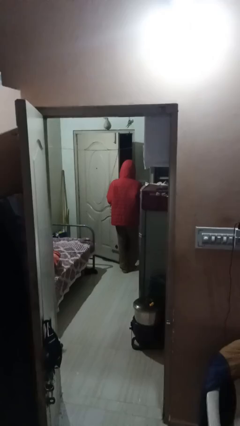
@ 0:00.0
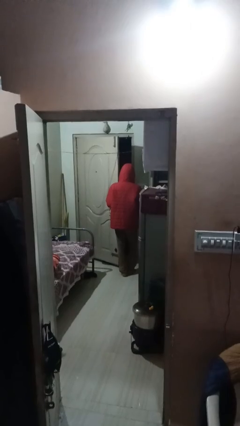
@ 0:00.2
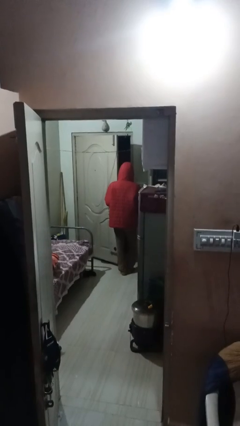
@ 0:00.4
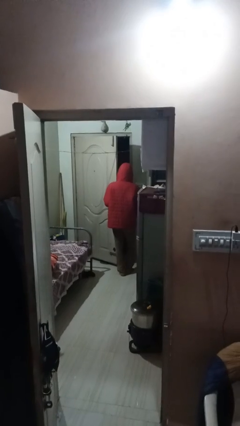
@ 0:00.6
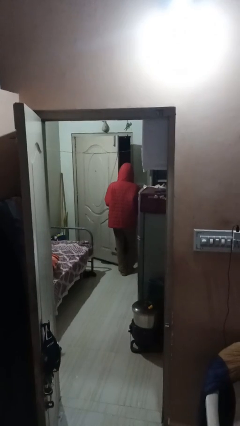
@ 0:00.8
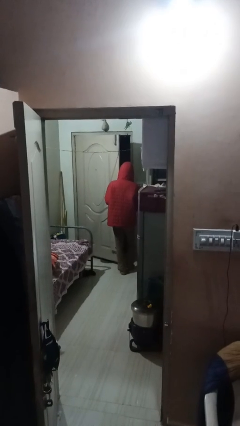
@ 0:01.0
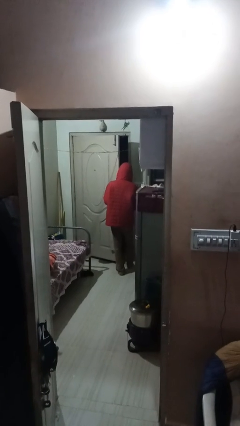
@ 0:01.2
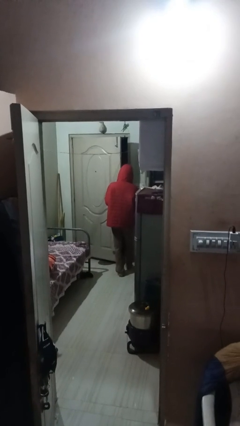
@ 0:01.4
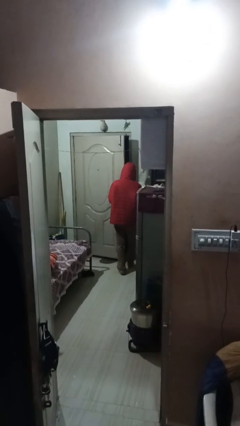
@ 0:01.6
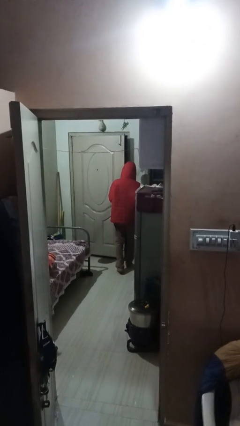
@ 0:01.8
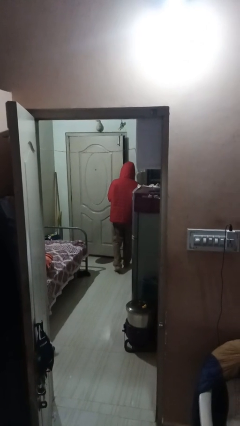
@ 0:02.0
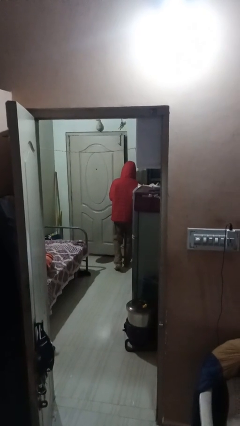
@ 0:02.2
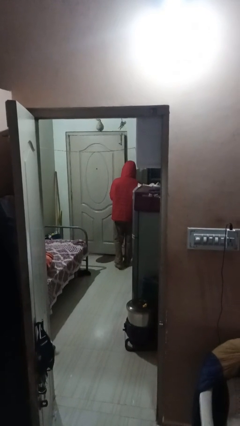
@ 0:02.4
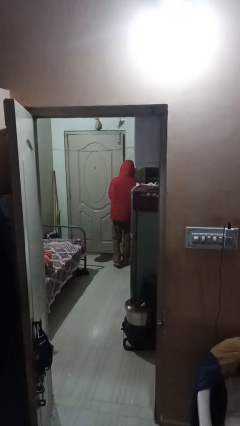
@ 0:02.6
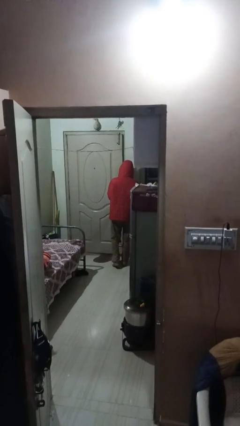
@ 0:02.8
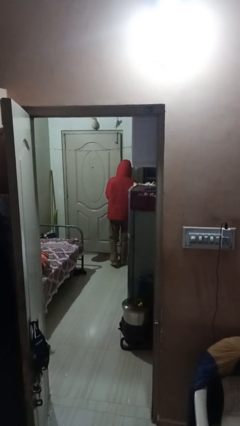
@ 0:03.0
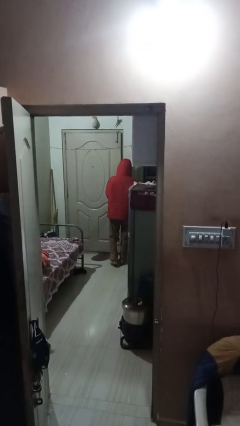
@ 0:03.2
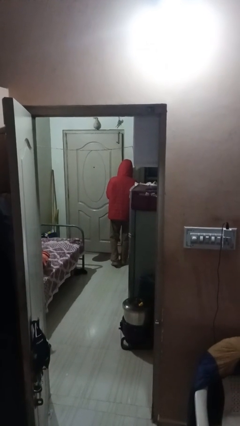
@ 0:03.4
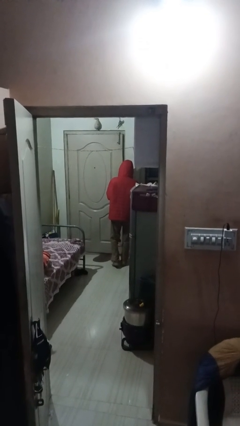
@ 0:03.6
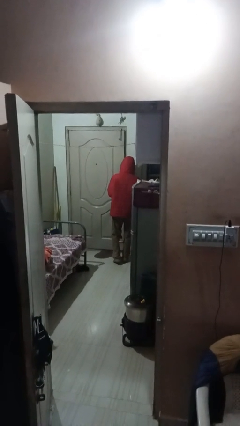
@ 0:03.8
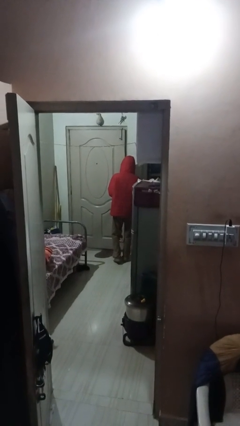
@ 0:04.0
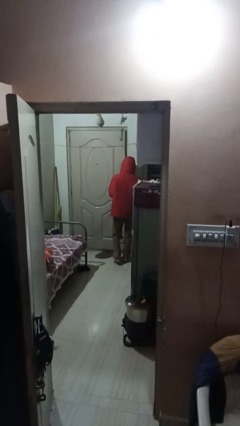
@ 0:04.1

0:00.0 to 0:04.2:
person closes facility door

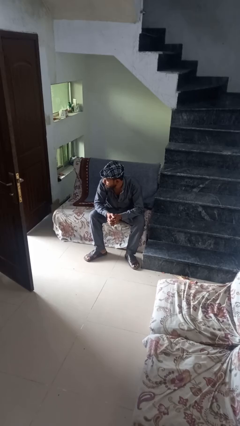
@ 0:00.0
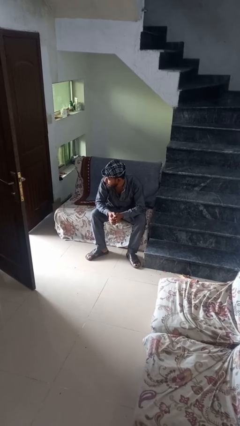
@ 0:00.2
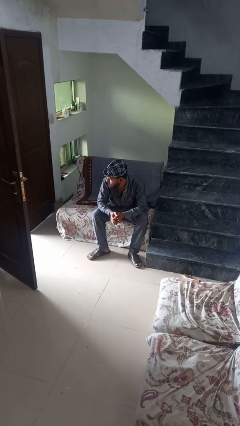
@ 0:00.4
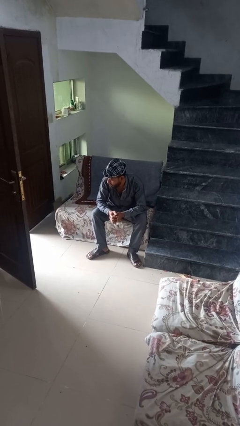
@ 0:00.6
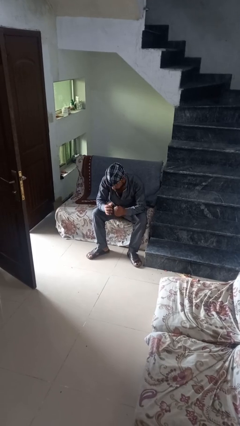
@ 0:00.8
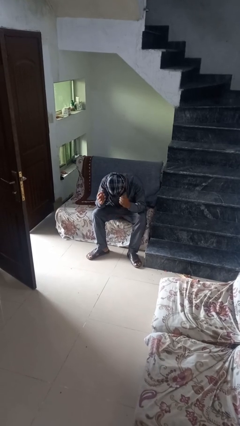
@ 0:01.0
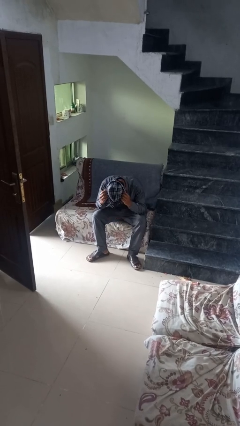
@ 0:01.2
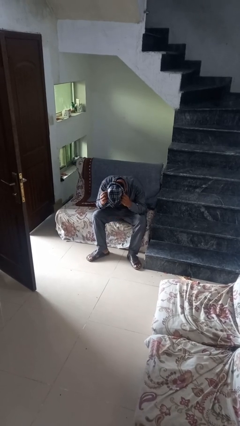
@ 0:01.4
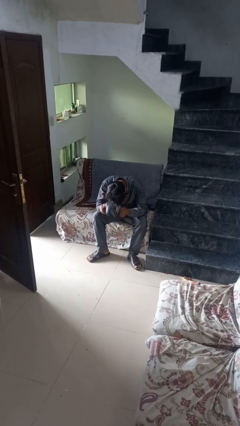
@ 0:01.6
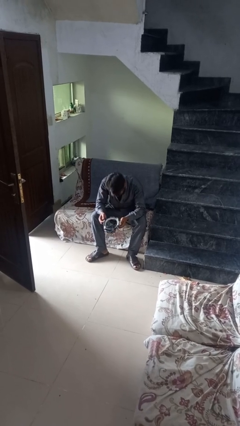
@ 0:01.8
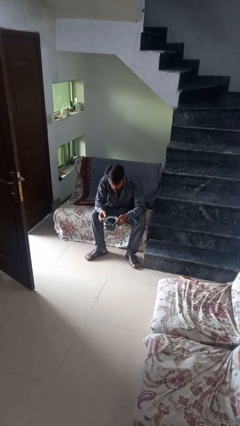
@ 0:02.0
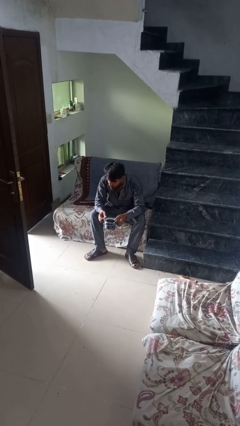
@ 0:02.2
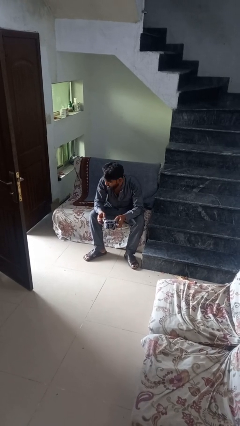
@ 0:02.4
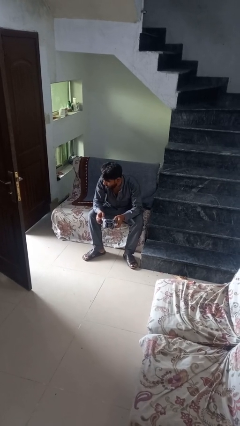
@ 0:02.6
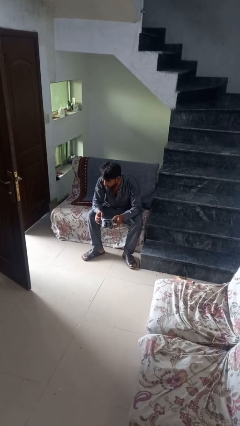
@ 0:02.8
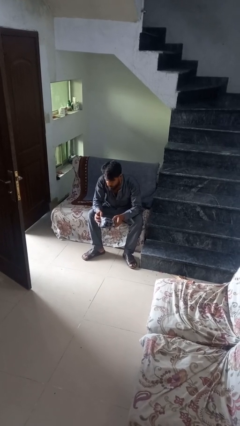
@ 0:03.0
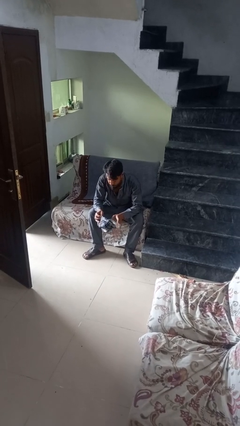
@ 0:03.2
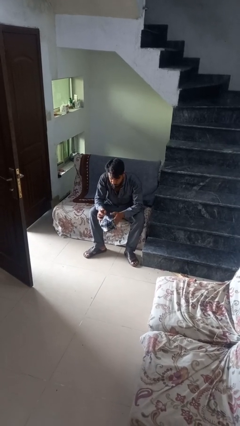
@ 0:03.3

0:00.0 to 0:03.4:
person takes off hat

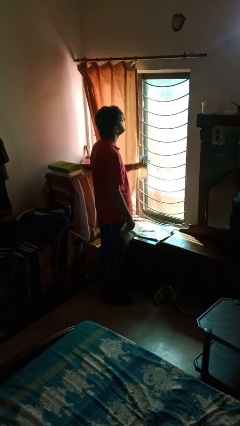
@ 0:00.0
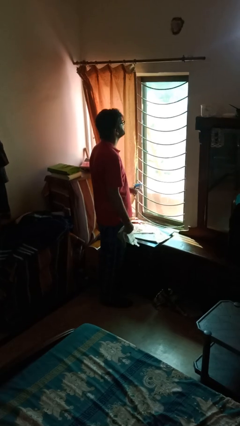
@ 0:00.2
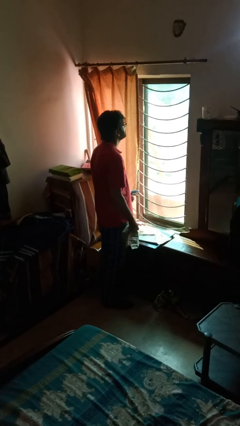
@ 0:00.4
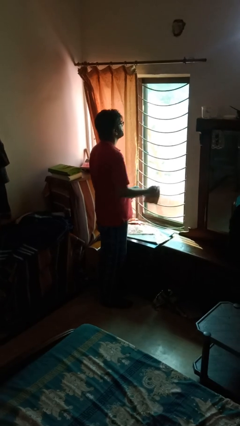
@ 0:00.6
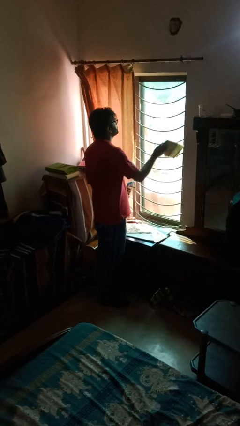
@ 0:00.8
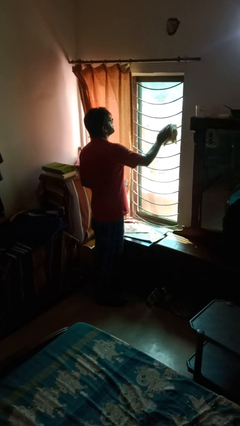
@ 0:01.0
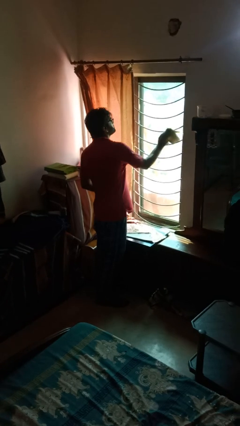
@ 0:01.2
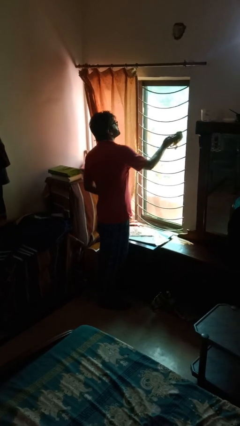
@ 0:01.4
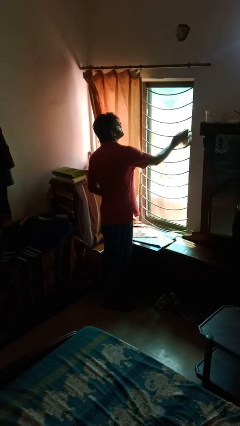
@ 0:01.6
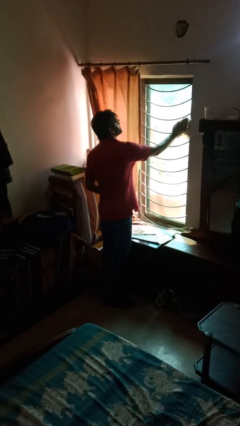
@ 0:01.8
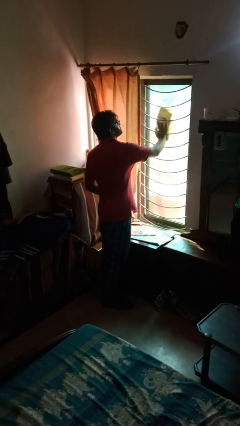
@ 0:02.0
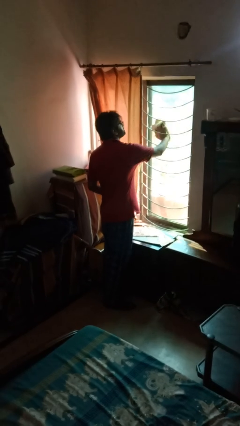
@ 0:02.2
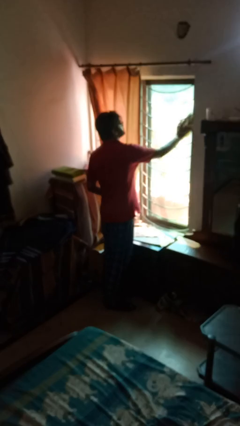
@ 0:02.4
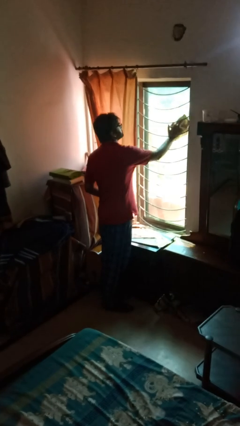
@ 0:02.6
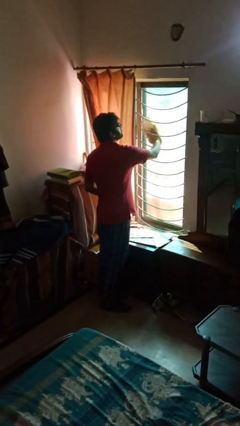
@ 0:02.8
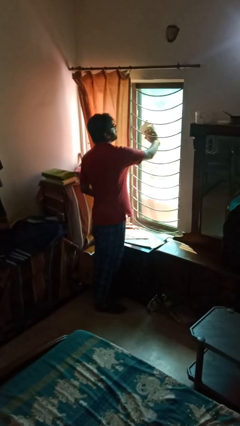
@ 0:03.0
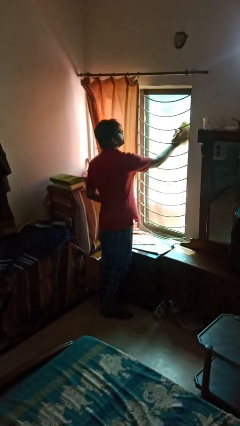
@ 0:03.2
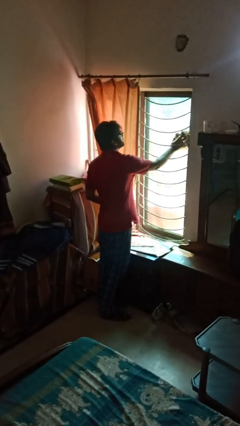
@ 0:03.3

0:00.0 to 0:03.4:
person washes window

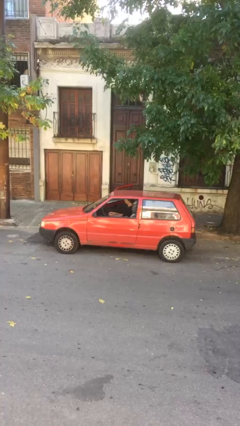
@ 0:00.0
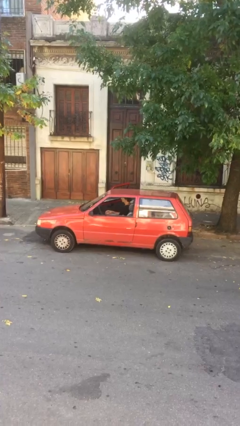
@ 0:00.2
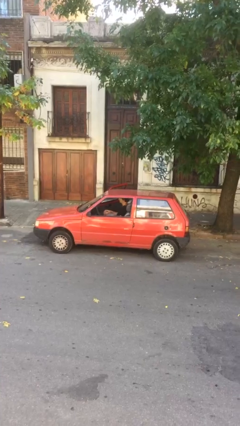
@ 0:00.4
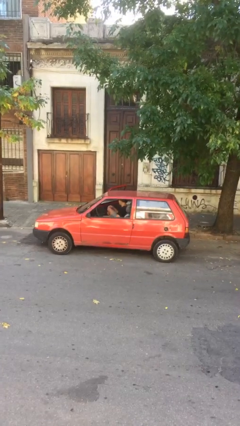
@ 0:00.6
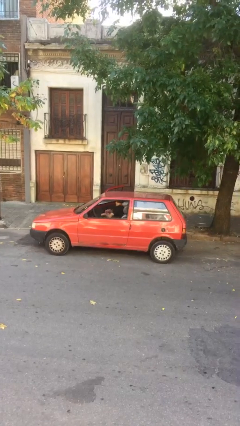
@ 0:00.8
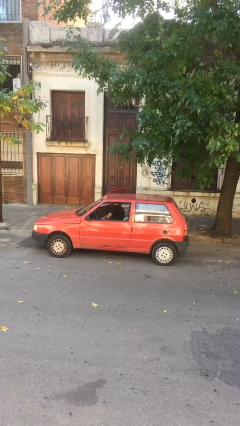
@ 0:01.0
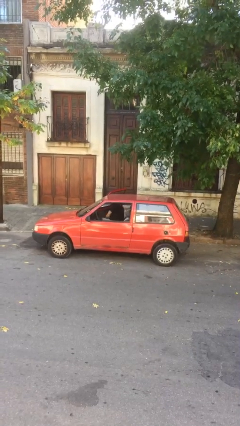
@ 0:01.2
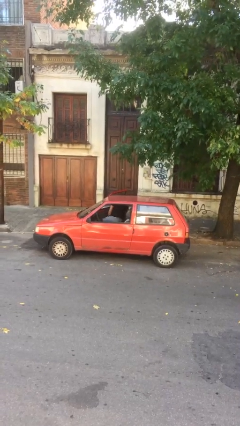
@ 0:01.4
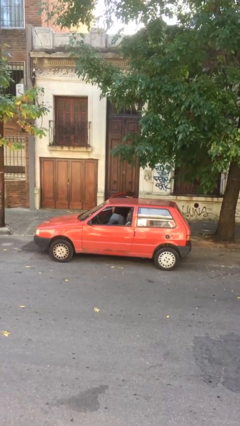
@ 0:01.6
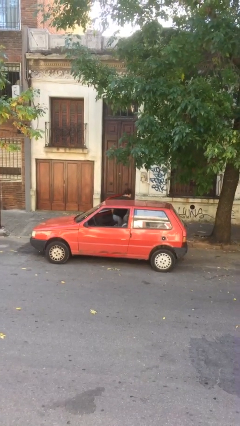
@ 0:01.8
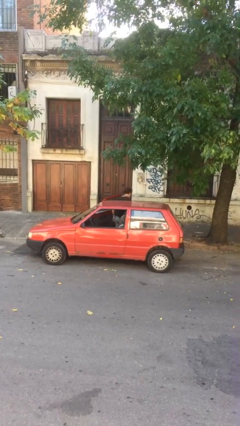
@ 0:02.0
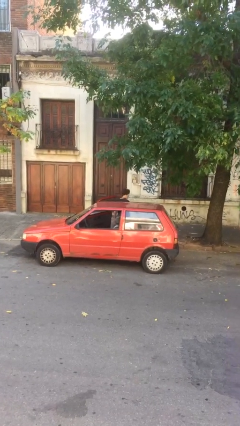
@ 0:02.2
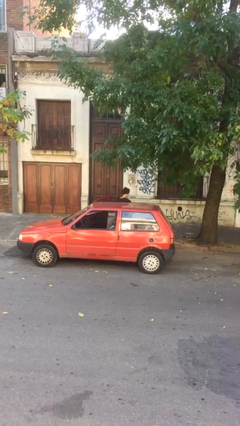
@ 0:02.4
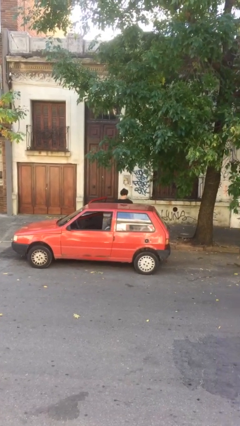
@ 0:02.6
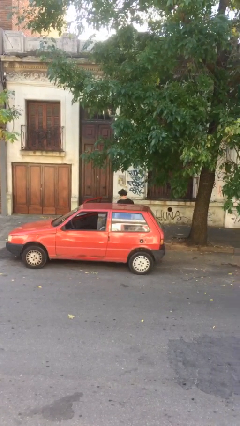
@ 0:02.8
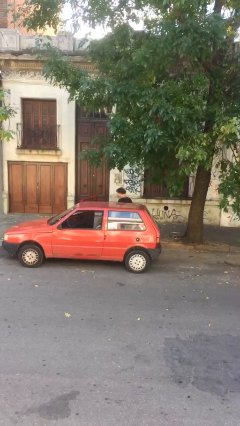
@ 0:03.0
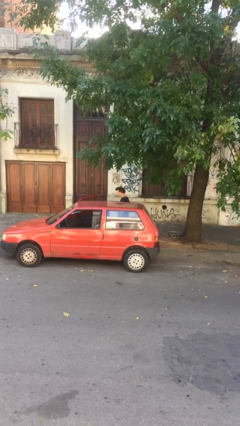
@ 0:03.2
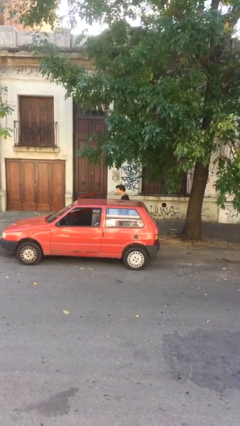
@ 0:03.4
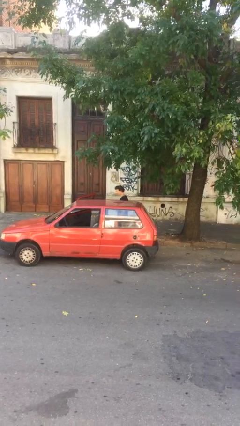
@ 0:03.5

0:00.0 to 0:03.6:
person exits car

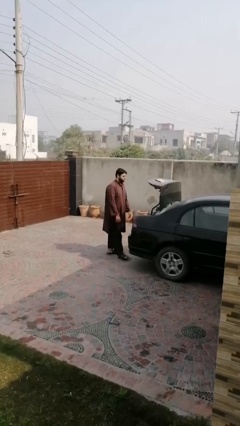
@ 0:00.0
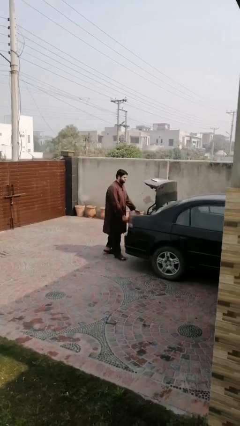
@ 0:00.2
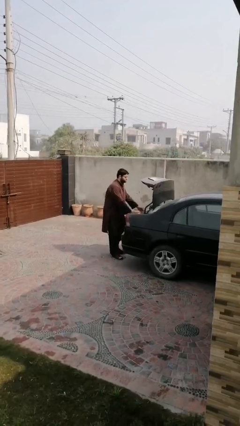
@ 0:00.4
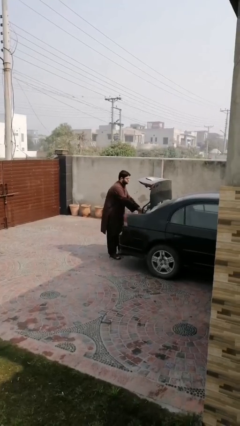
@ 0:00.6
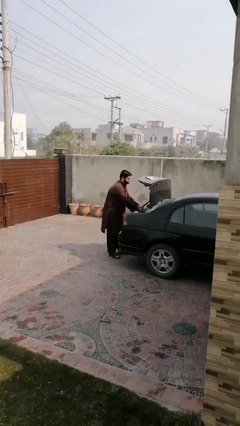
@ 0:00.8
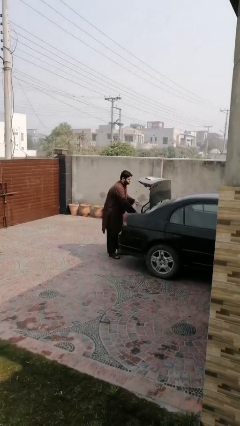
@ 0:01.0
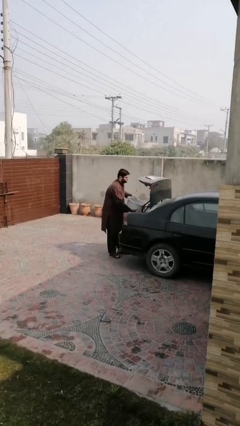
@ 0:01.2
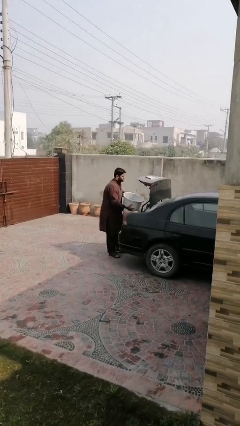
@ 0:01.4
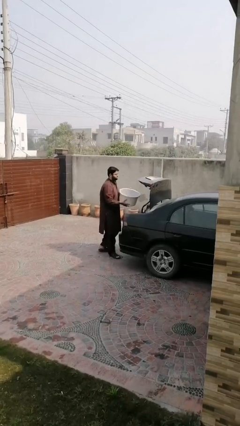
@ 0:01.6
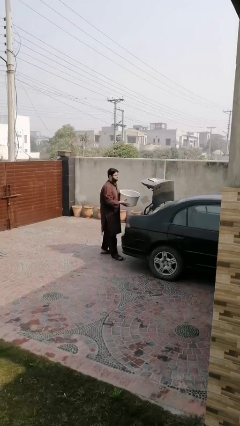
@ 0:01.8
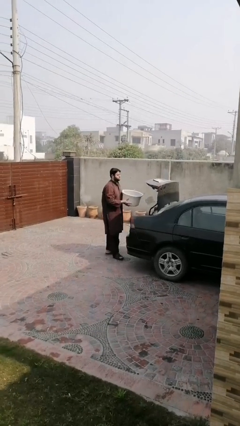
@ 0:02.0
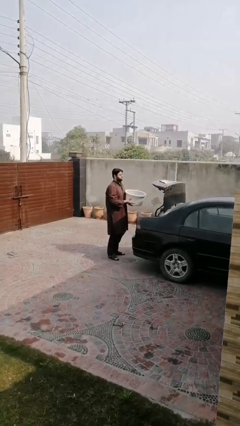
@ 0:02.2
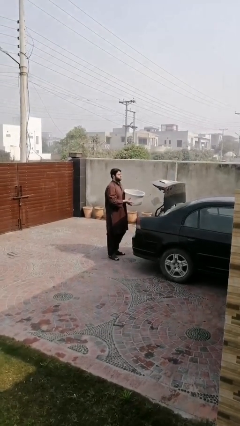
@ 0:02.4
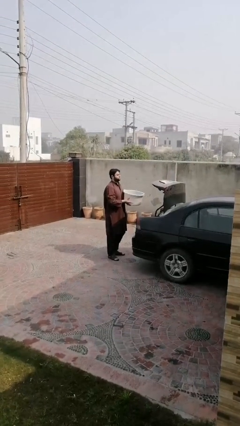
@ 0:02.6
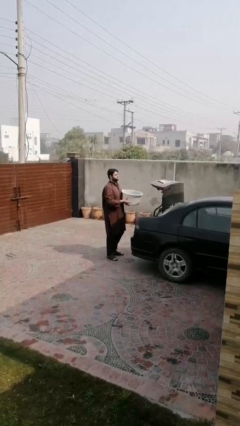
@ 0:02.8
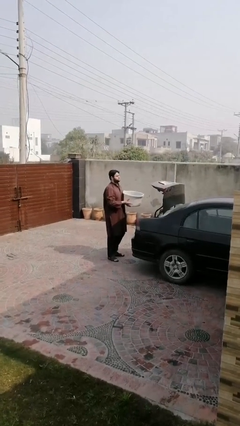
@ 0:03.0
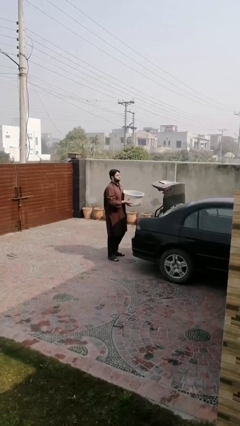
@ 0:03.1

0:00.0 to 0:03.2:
person unloads car
